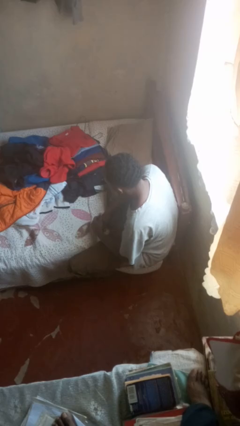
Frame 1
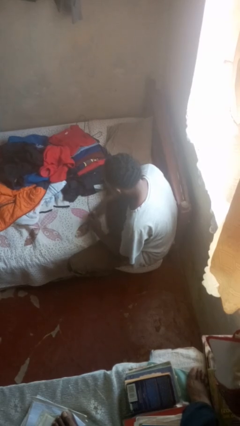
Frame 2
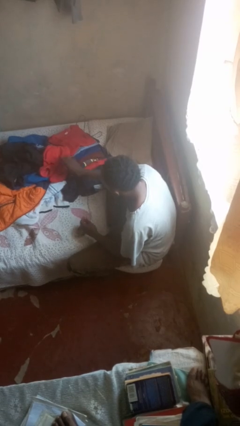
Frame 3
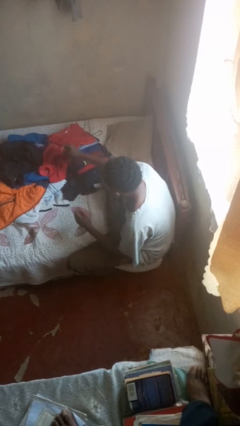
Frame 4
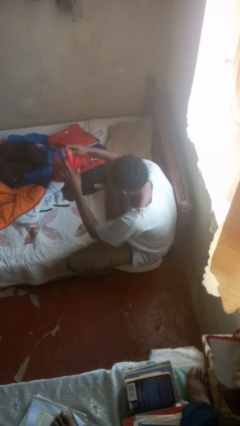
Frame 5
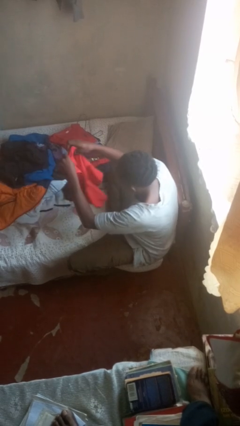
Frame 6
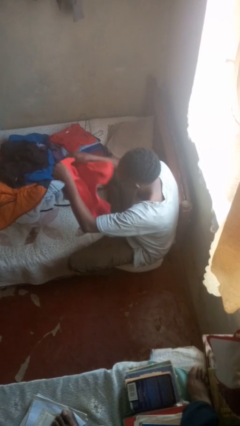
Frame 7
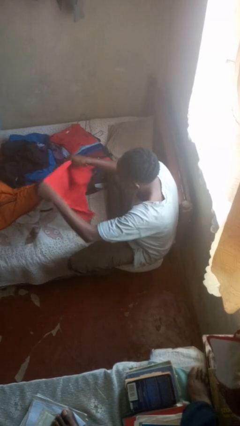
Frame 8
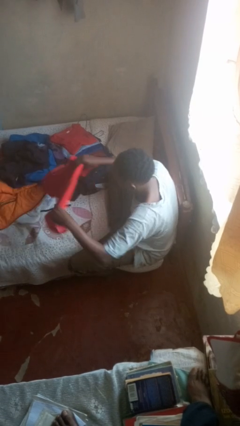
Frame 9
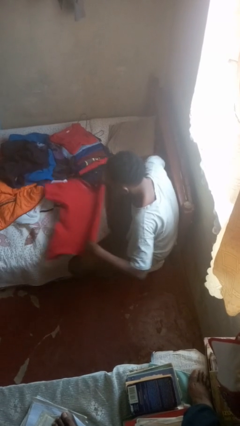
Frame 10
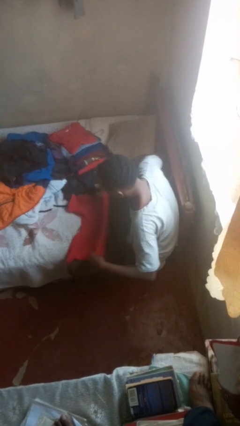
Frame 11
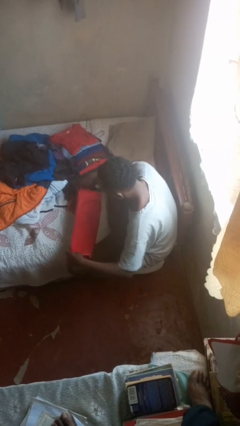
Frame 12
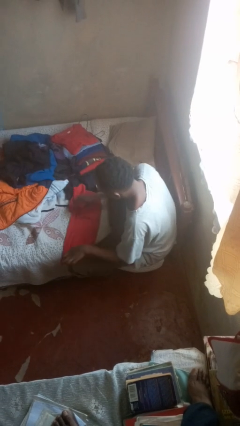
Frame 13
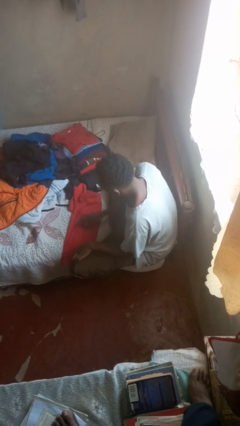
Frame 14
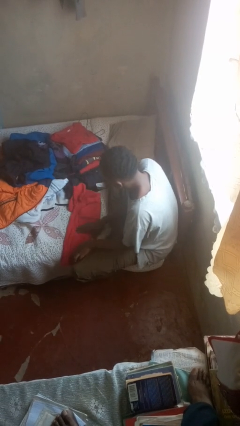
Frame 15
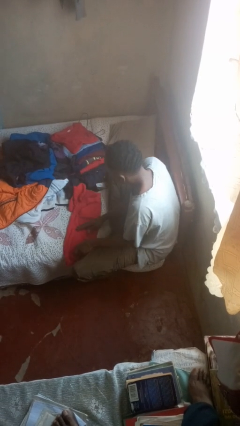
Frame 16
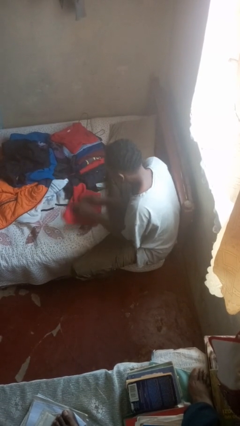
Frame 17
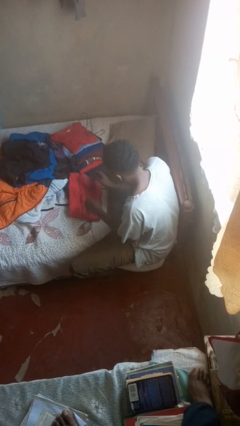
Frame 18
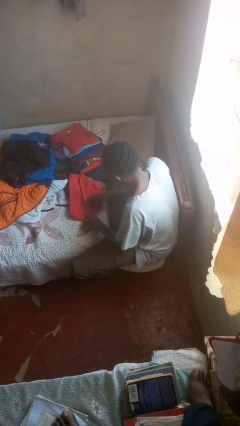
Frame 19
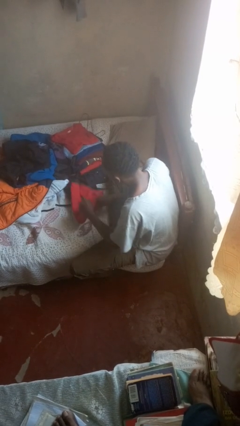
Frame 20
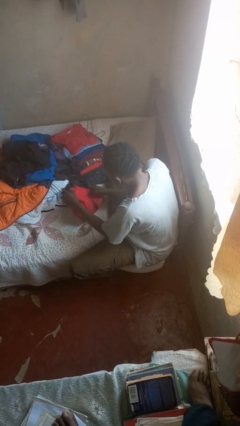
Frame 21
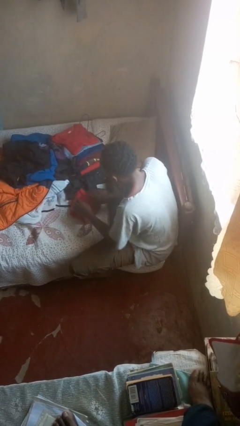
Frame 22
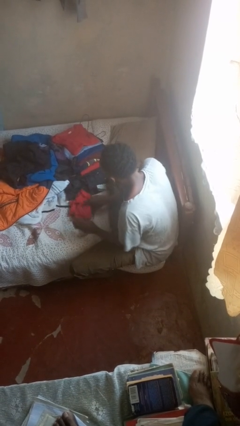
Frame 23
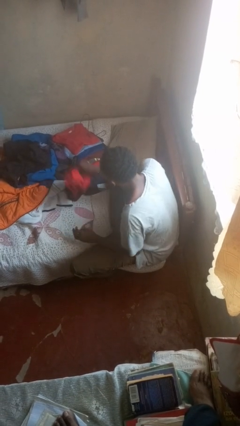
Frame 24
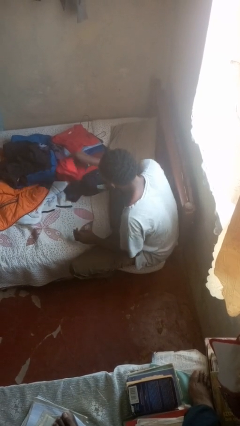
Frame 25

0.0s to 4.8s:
person folds shirt

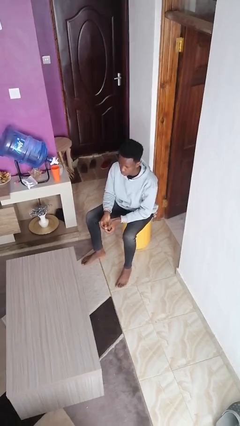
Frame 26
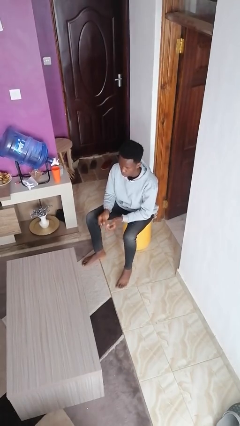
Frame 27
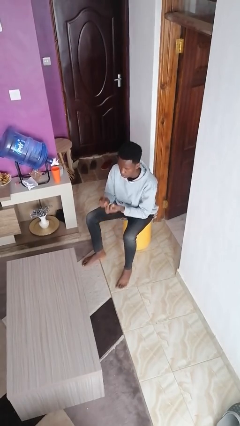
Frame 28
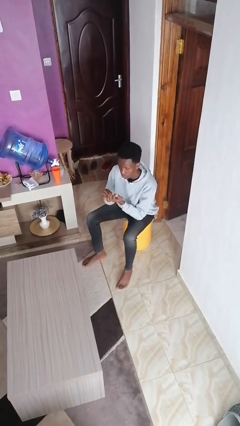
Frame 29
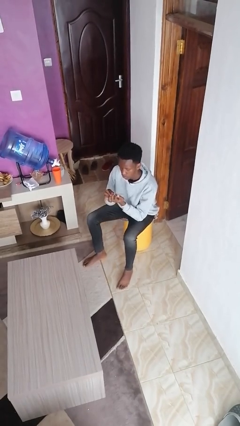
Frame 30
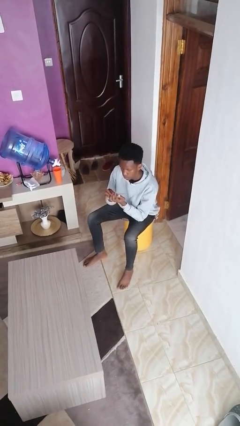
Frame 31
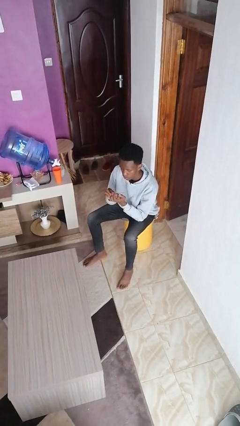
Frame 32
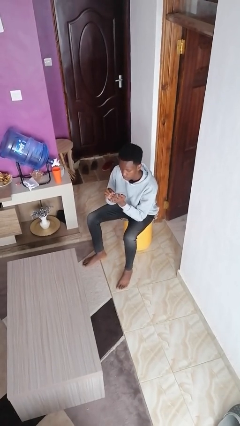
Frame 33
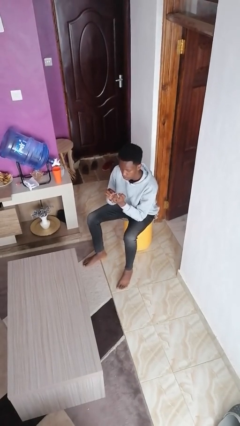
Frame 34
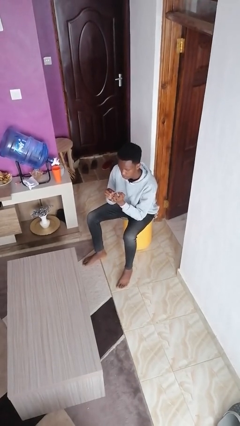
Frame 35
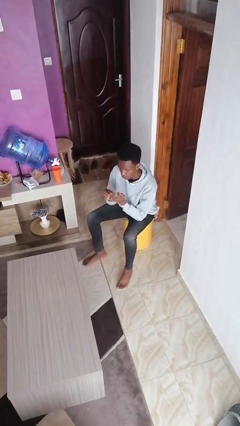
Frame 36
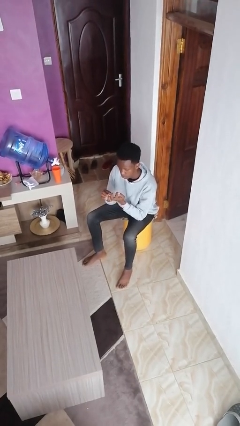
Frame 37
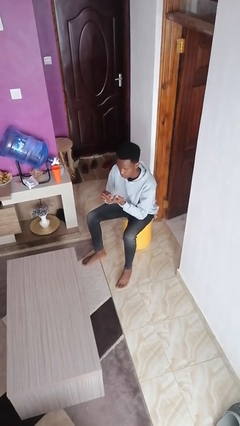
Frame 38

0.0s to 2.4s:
person files fingernails

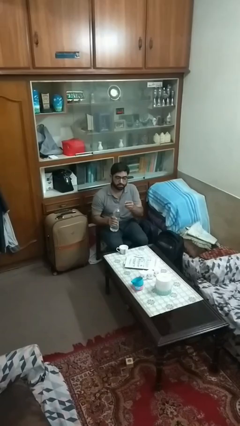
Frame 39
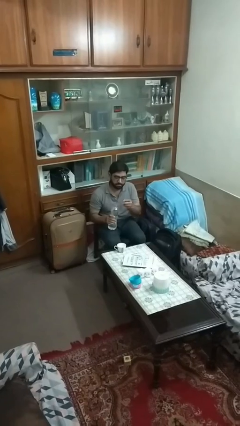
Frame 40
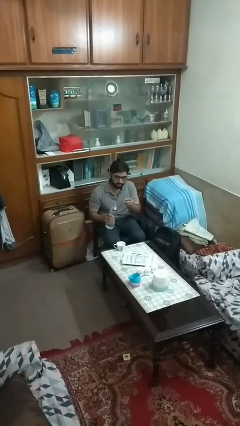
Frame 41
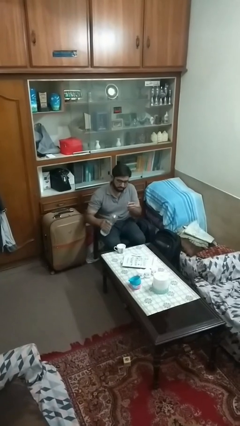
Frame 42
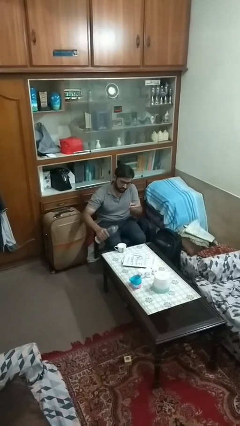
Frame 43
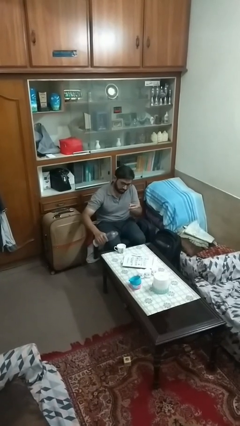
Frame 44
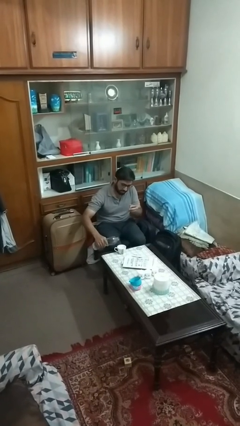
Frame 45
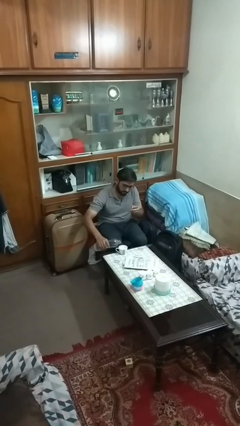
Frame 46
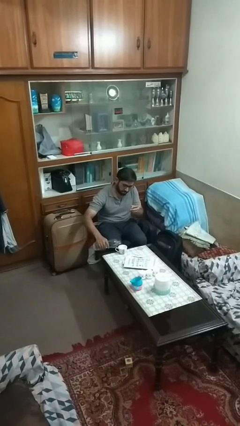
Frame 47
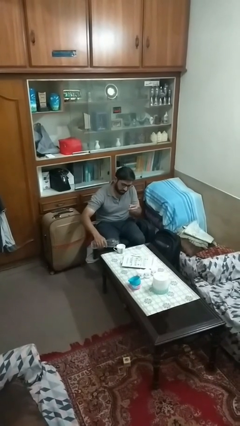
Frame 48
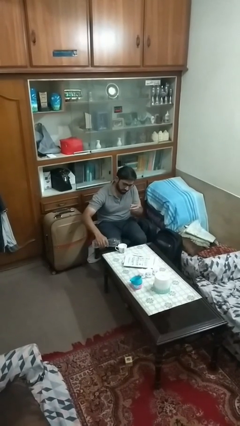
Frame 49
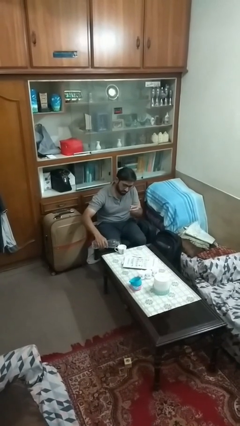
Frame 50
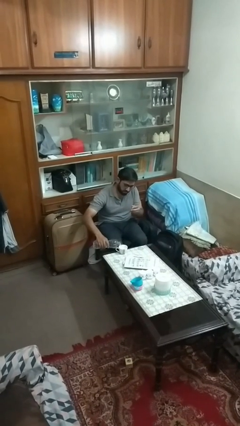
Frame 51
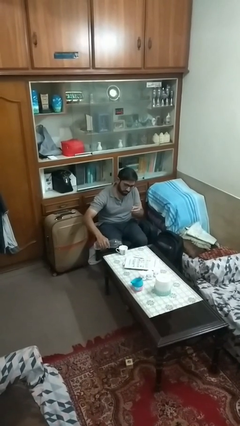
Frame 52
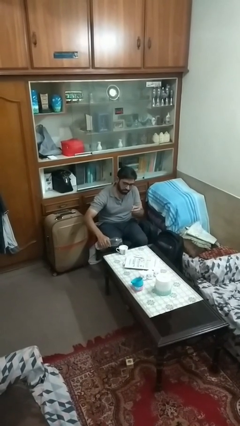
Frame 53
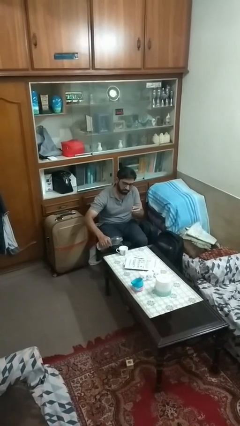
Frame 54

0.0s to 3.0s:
person pours liquid into cup

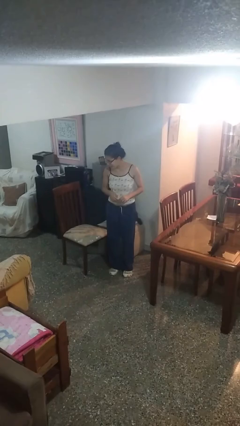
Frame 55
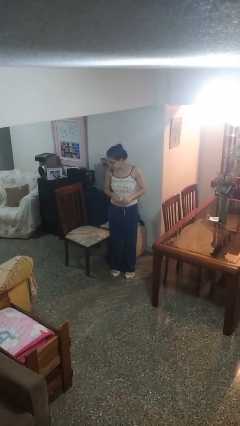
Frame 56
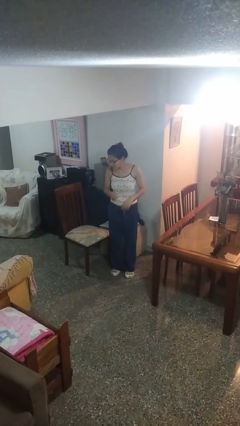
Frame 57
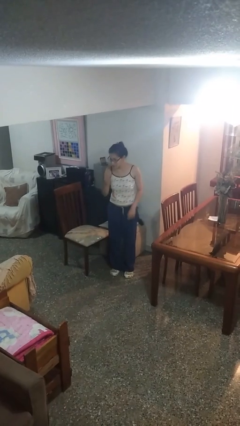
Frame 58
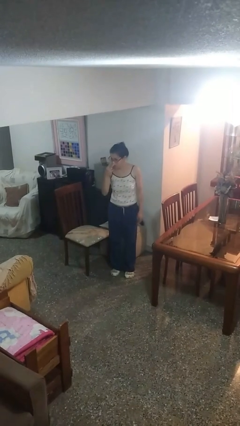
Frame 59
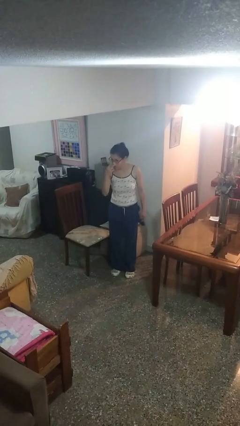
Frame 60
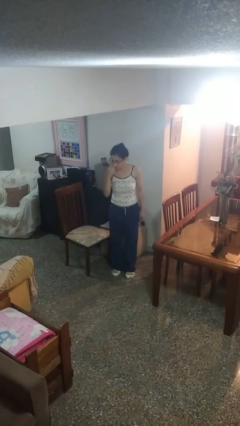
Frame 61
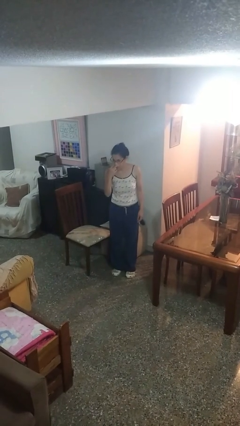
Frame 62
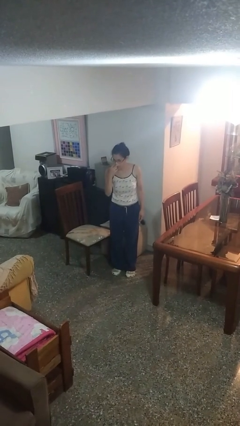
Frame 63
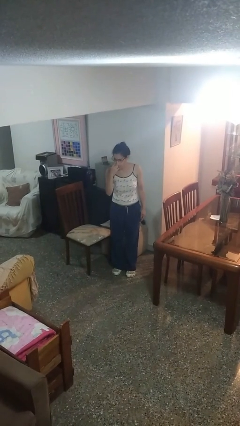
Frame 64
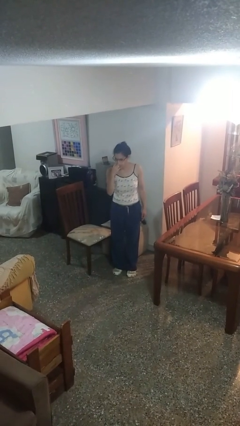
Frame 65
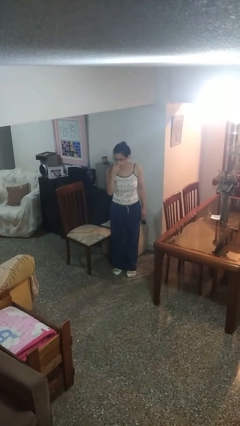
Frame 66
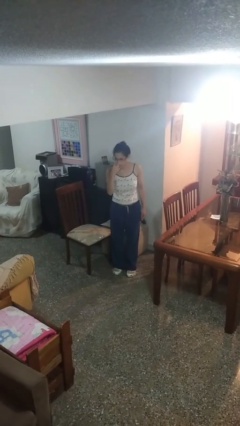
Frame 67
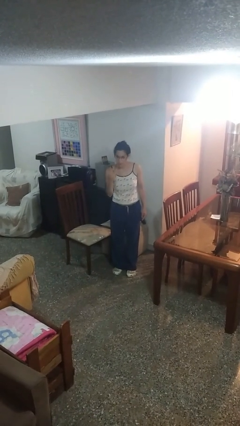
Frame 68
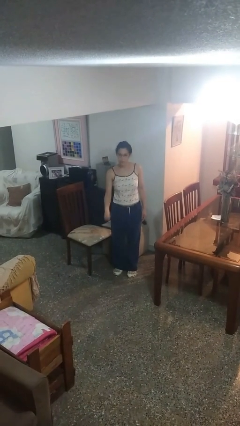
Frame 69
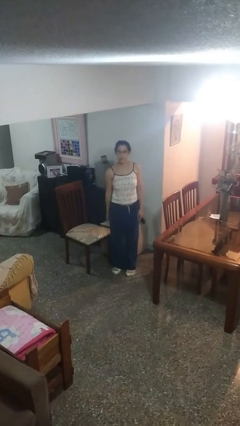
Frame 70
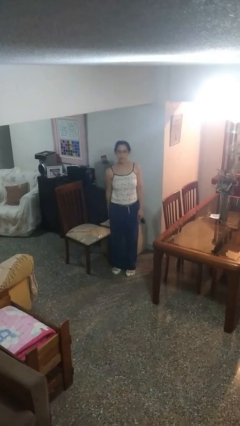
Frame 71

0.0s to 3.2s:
person gestures watch closely

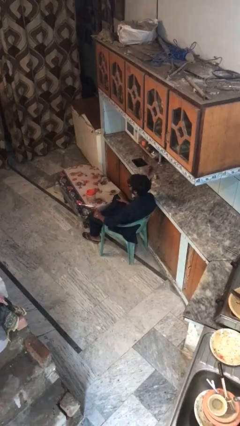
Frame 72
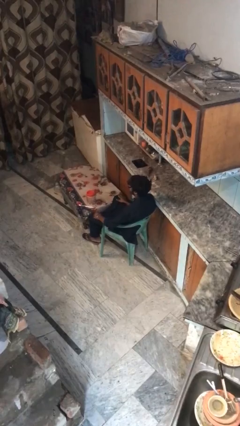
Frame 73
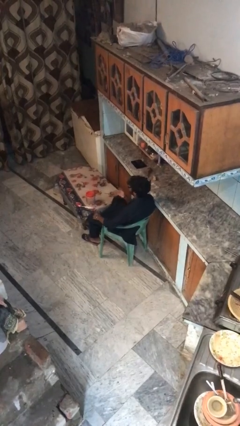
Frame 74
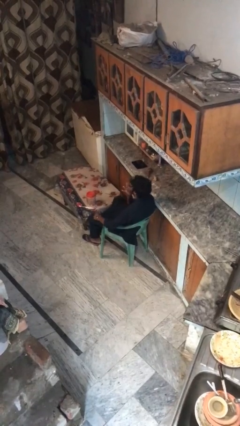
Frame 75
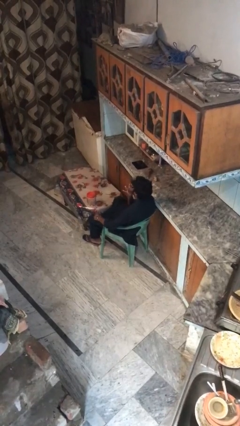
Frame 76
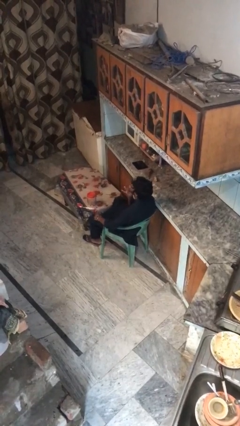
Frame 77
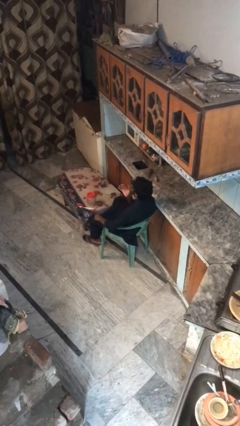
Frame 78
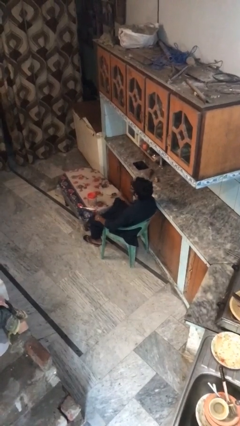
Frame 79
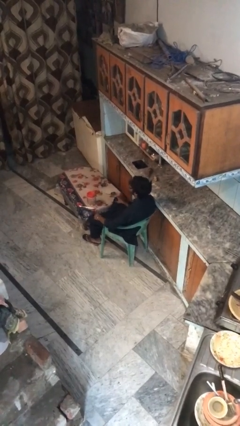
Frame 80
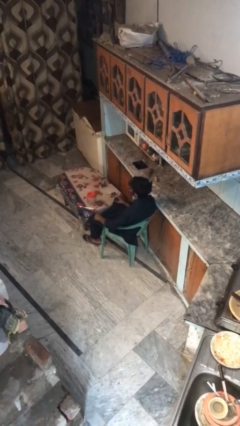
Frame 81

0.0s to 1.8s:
person licks fingers

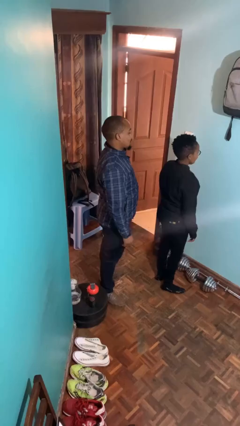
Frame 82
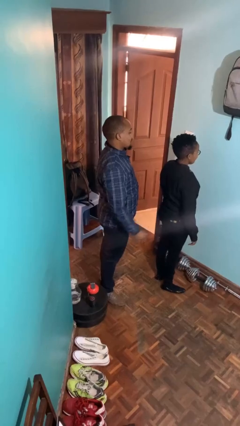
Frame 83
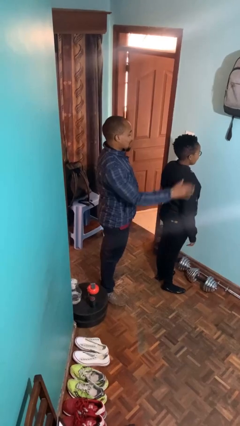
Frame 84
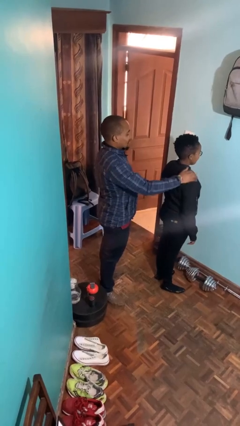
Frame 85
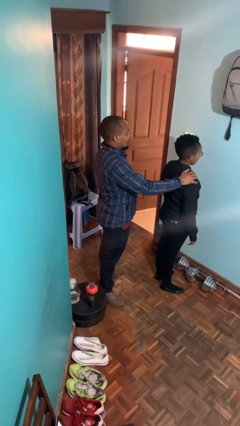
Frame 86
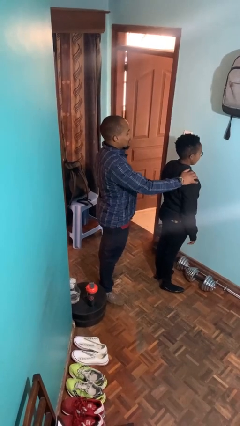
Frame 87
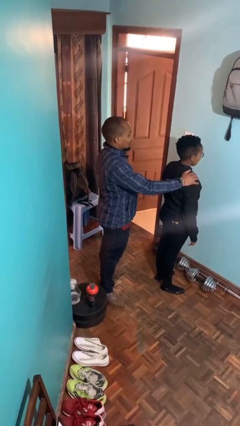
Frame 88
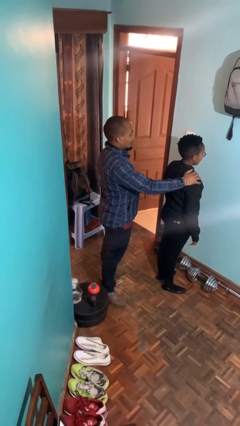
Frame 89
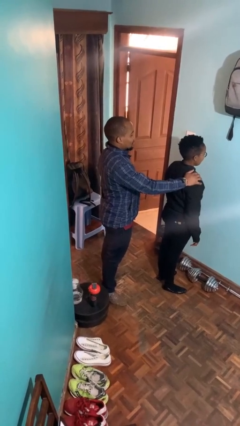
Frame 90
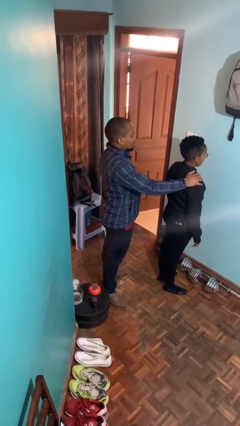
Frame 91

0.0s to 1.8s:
person grabs person by shoulder

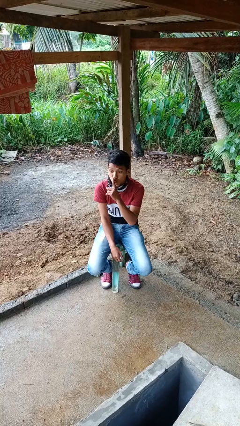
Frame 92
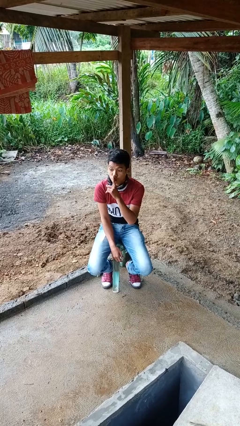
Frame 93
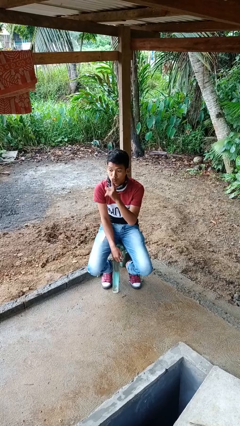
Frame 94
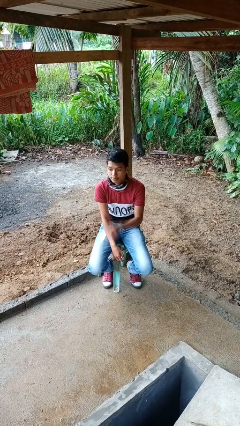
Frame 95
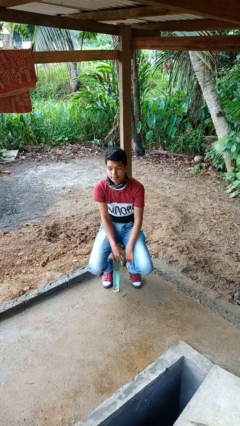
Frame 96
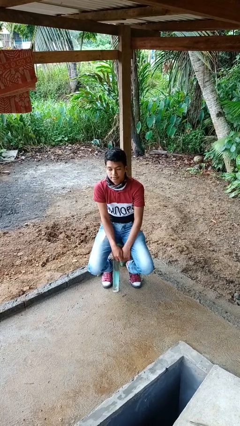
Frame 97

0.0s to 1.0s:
person gestures be quiet
